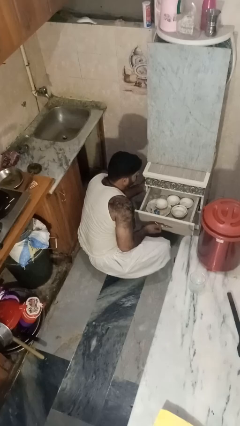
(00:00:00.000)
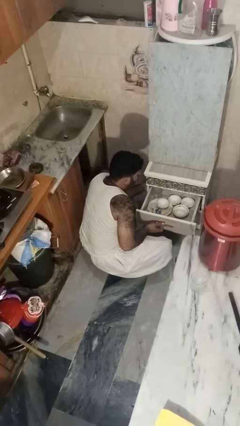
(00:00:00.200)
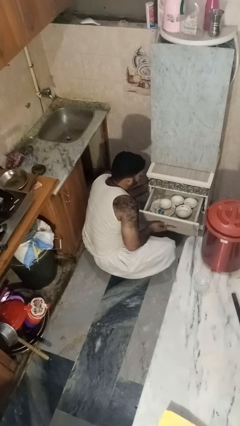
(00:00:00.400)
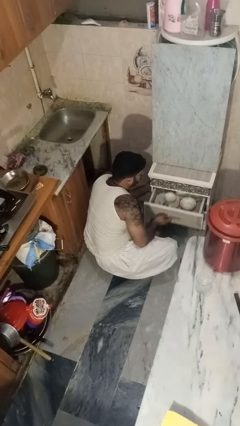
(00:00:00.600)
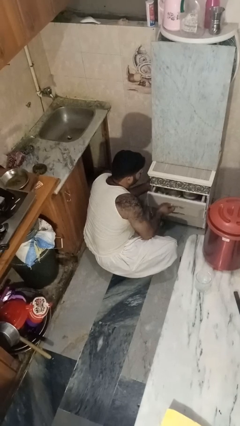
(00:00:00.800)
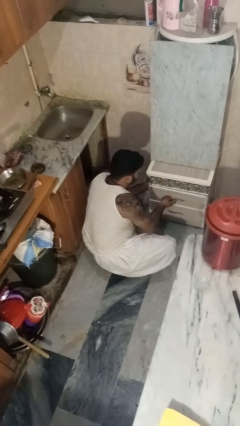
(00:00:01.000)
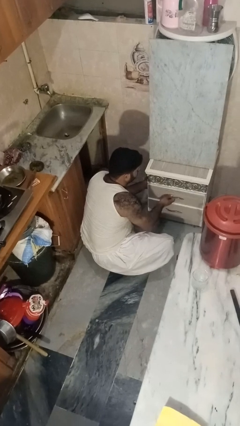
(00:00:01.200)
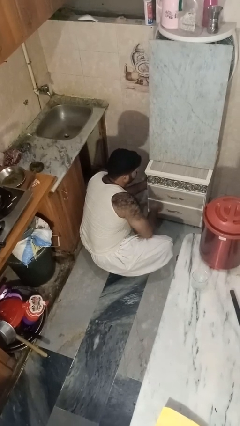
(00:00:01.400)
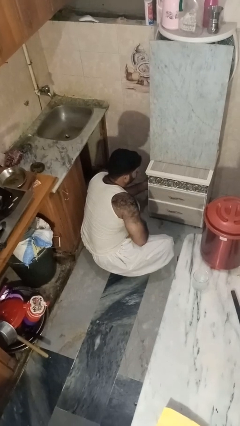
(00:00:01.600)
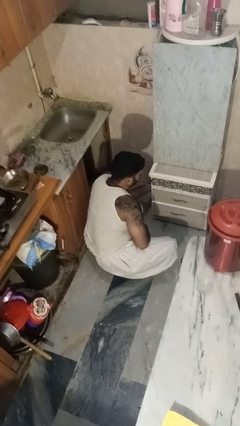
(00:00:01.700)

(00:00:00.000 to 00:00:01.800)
person closes kitchen drawer

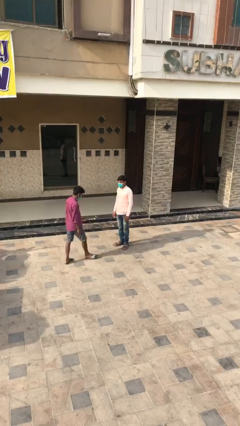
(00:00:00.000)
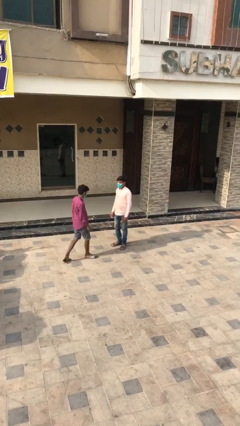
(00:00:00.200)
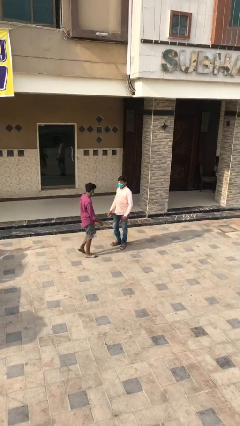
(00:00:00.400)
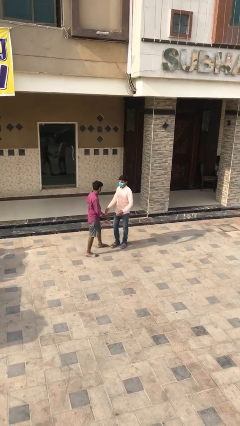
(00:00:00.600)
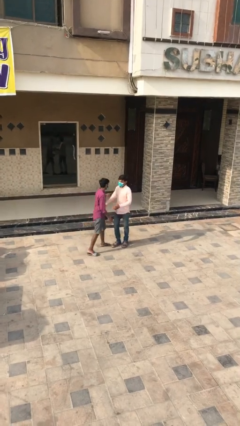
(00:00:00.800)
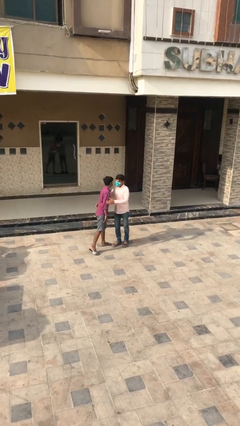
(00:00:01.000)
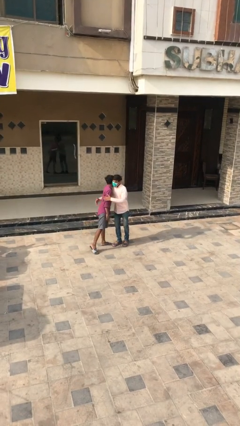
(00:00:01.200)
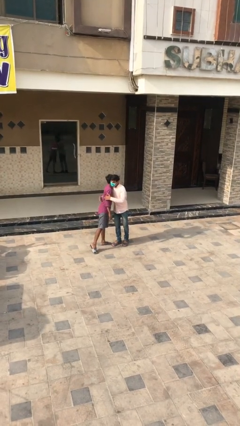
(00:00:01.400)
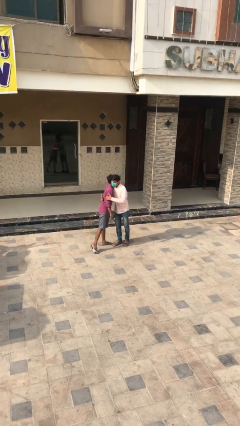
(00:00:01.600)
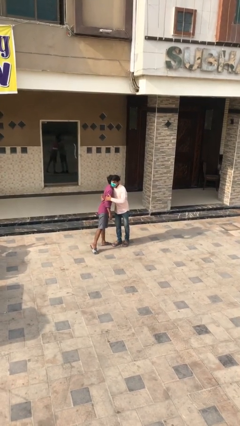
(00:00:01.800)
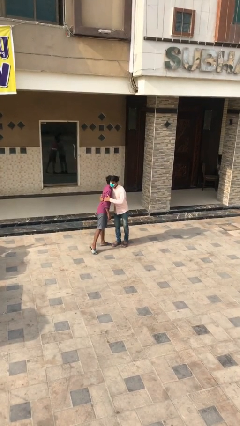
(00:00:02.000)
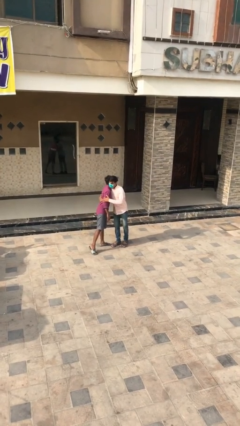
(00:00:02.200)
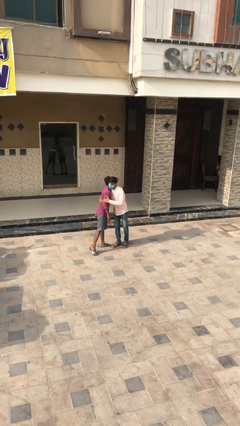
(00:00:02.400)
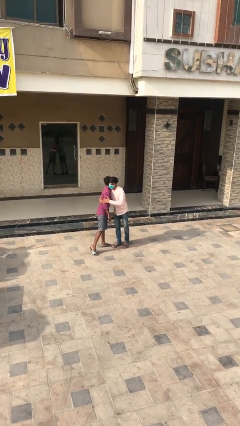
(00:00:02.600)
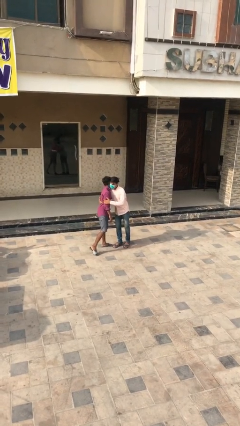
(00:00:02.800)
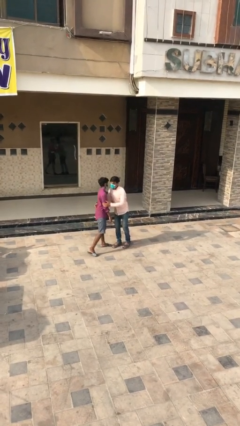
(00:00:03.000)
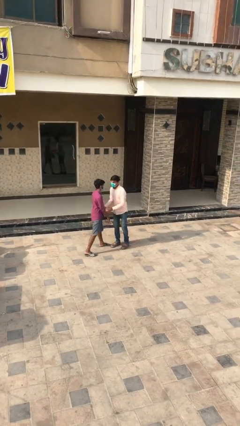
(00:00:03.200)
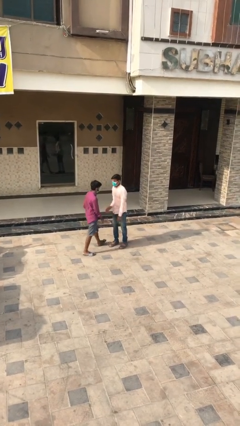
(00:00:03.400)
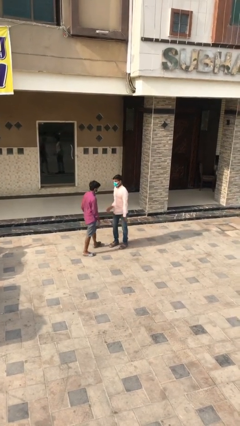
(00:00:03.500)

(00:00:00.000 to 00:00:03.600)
person embraces person

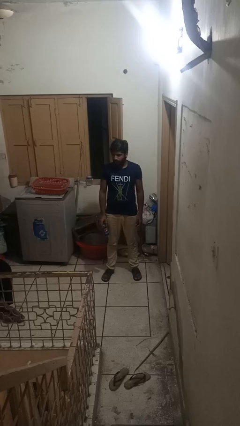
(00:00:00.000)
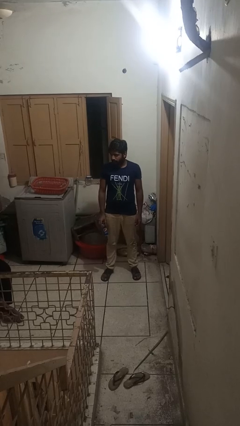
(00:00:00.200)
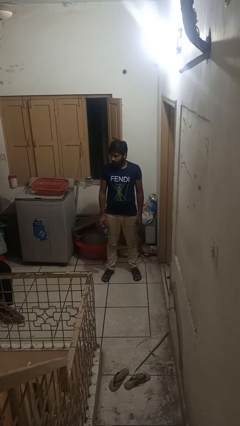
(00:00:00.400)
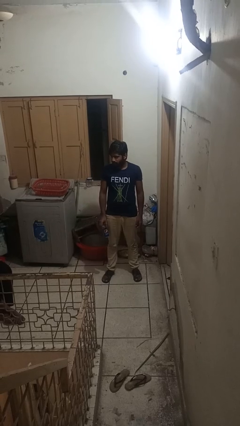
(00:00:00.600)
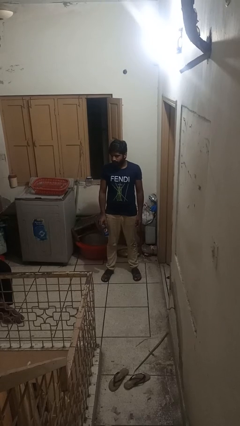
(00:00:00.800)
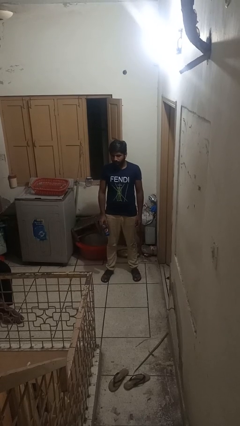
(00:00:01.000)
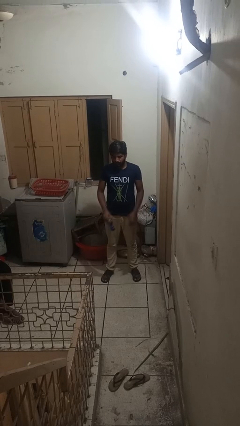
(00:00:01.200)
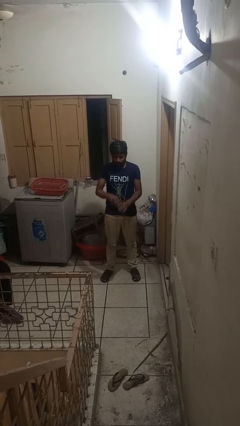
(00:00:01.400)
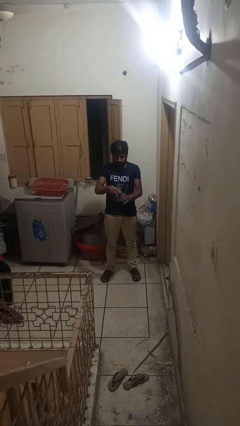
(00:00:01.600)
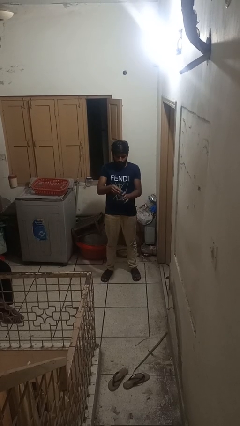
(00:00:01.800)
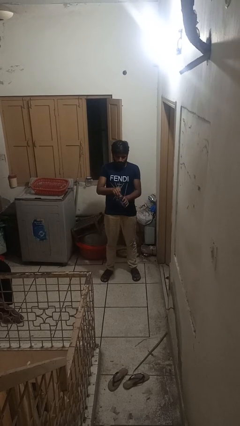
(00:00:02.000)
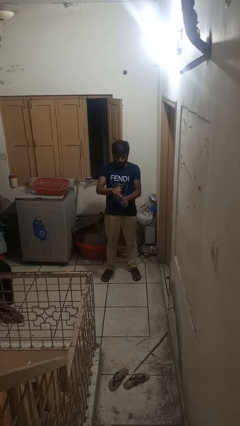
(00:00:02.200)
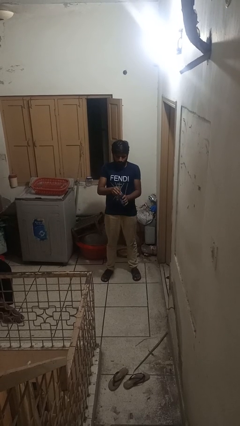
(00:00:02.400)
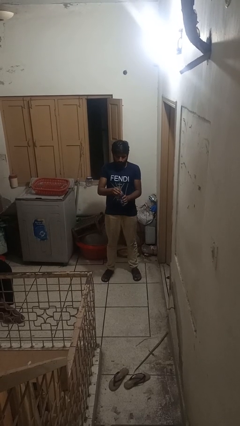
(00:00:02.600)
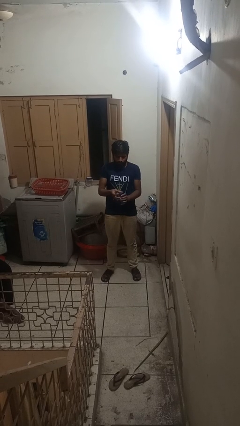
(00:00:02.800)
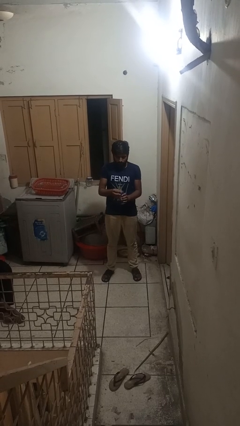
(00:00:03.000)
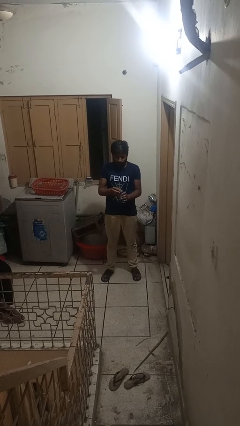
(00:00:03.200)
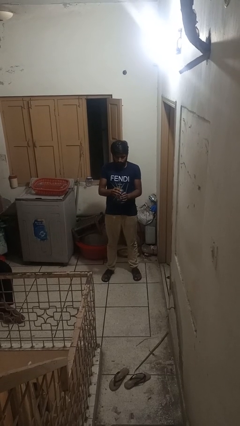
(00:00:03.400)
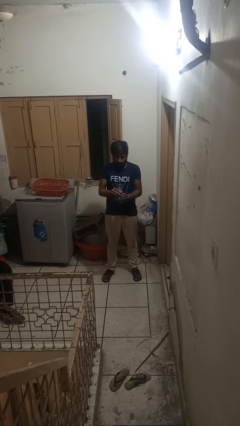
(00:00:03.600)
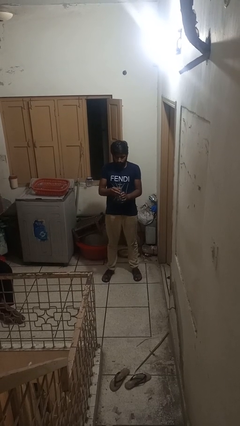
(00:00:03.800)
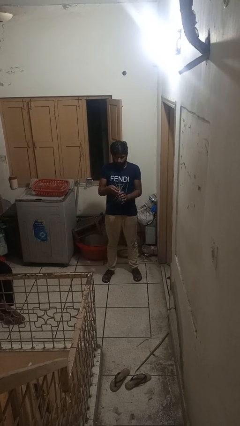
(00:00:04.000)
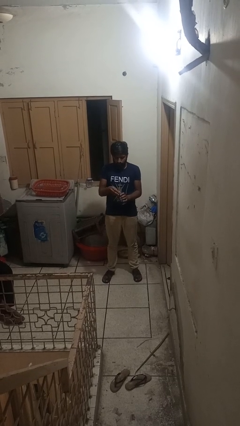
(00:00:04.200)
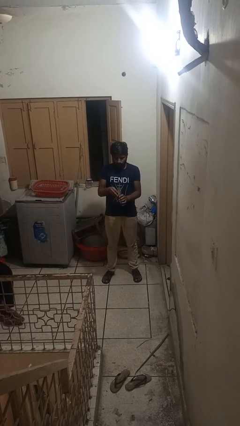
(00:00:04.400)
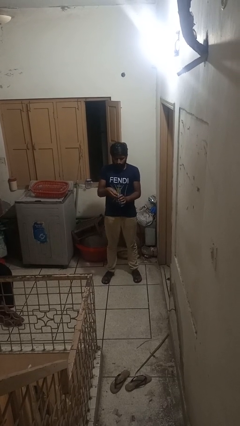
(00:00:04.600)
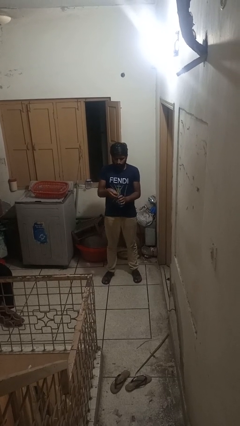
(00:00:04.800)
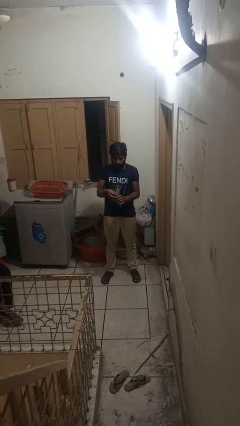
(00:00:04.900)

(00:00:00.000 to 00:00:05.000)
person opens beverage can

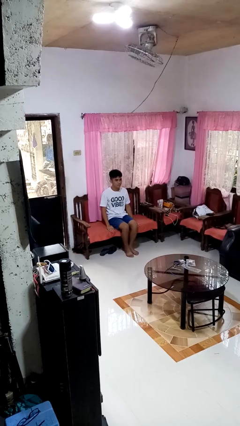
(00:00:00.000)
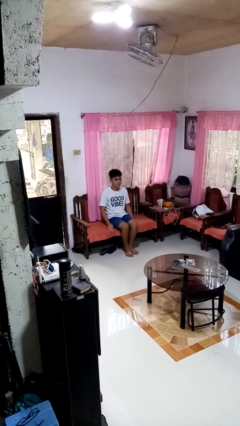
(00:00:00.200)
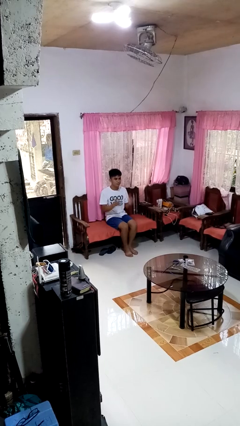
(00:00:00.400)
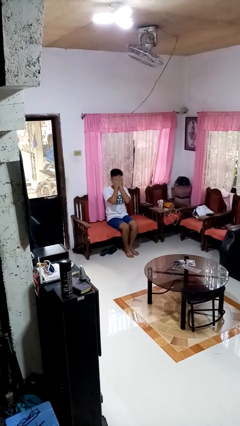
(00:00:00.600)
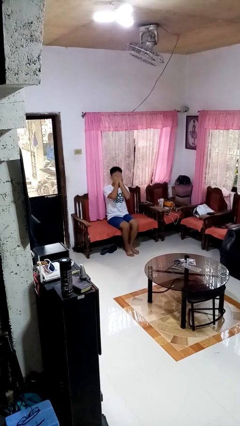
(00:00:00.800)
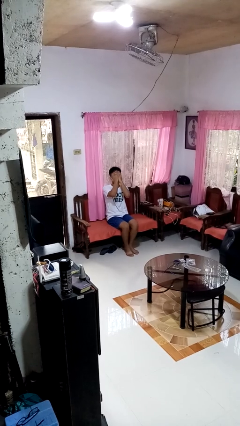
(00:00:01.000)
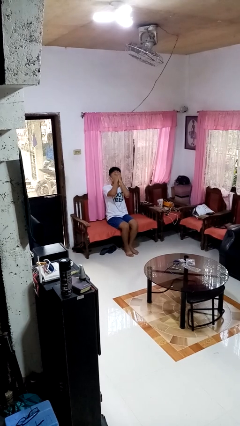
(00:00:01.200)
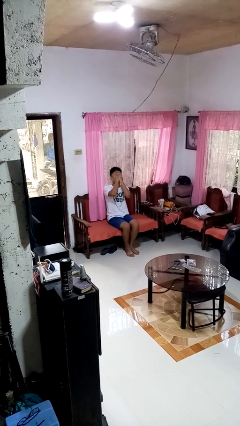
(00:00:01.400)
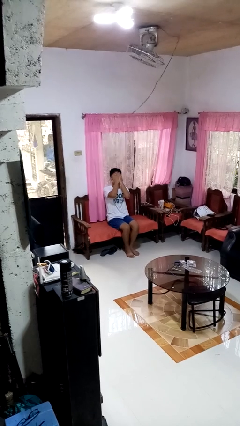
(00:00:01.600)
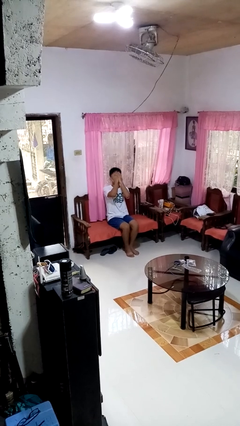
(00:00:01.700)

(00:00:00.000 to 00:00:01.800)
person covers face with hands

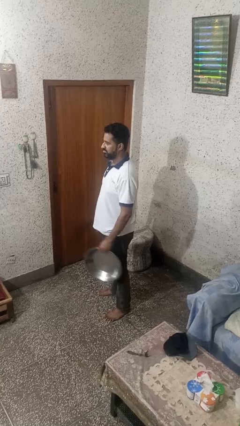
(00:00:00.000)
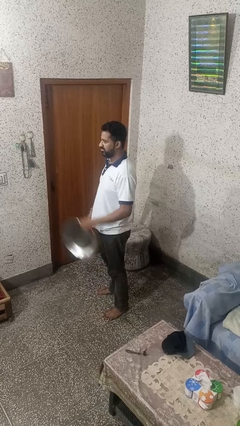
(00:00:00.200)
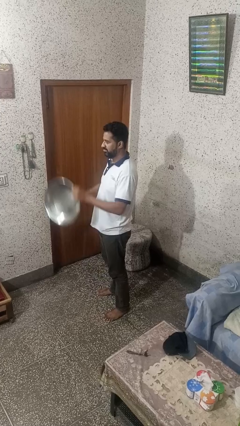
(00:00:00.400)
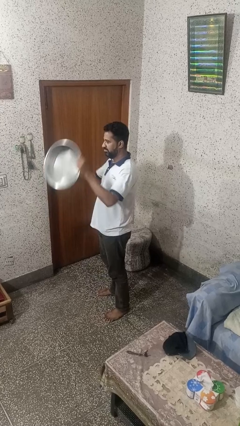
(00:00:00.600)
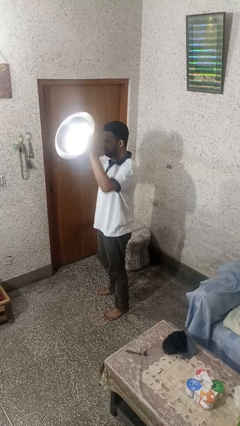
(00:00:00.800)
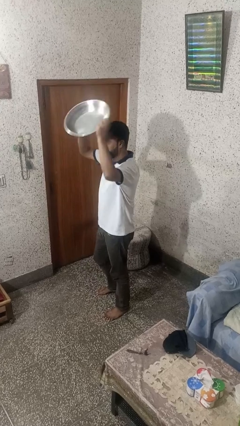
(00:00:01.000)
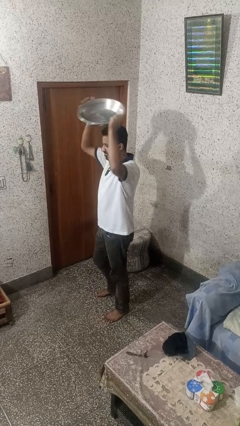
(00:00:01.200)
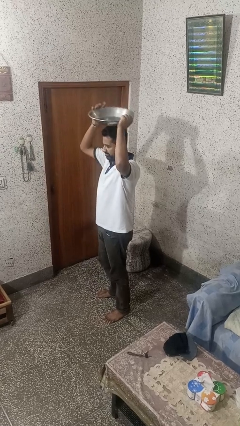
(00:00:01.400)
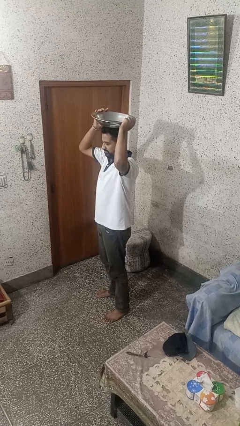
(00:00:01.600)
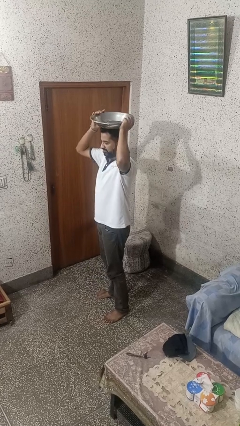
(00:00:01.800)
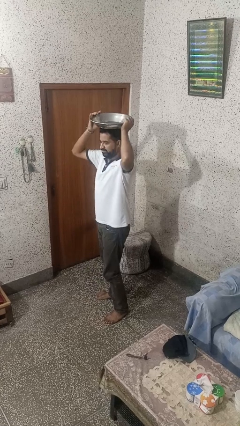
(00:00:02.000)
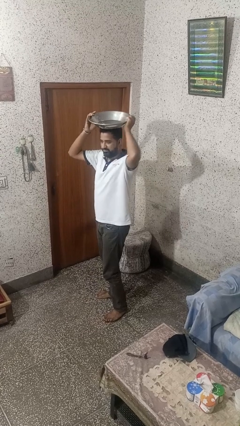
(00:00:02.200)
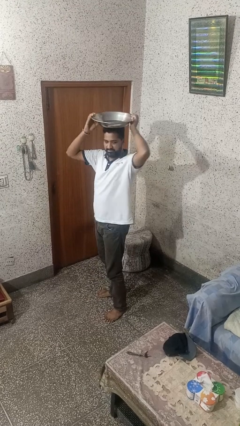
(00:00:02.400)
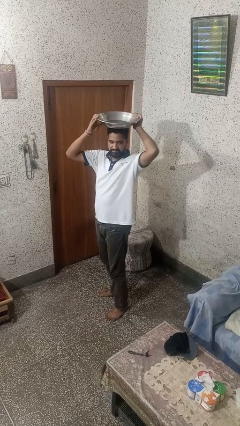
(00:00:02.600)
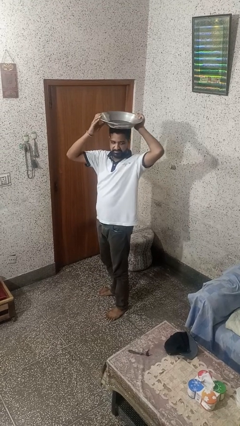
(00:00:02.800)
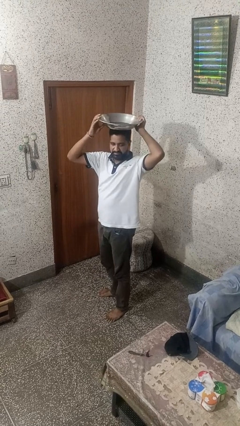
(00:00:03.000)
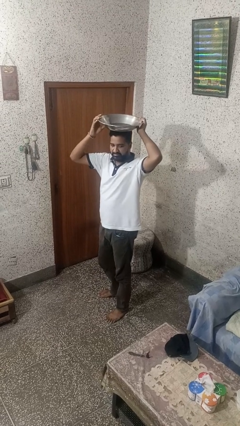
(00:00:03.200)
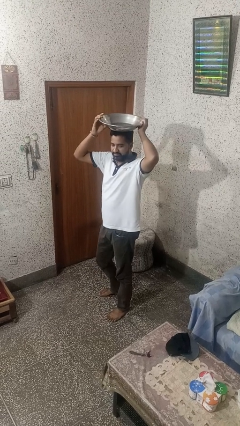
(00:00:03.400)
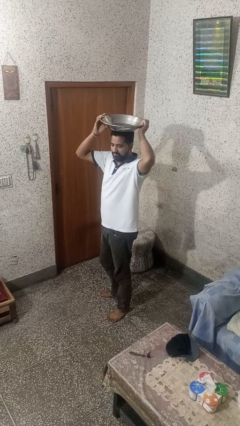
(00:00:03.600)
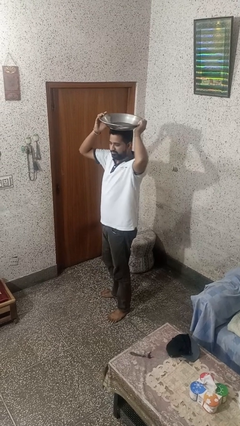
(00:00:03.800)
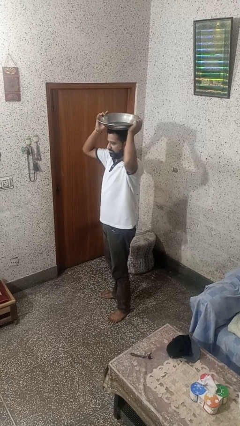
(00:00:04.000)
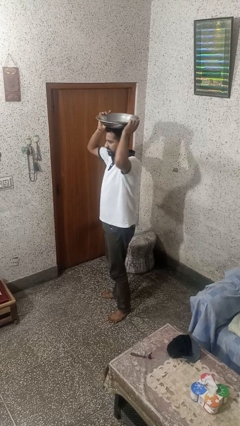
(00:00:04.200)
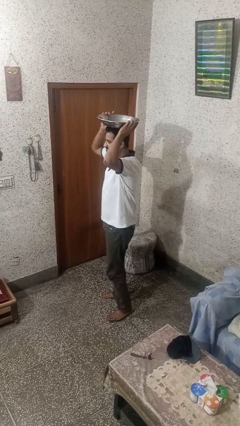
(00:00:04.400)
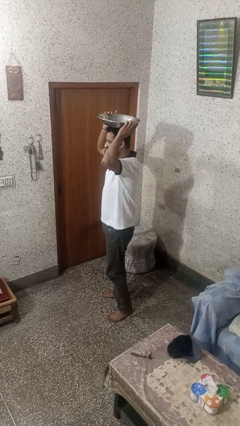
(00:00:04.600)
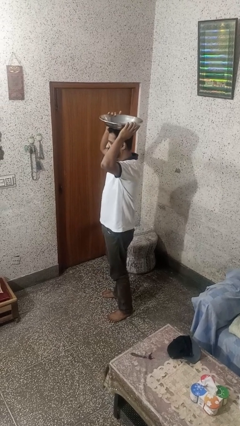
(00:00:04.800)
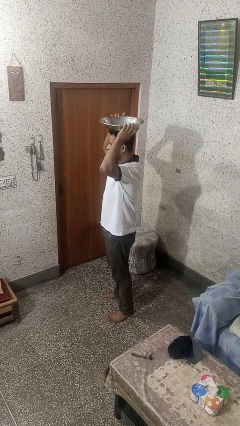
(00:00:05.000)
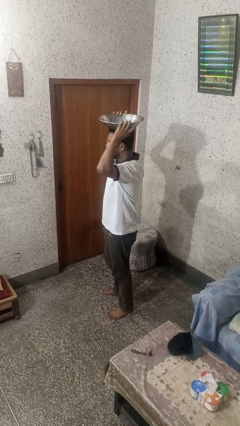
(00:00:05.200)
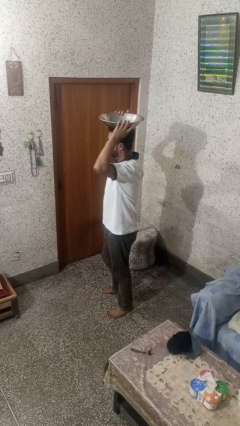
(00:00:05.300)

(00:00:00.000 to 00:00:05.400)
person holds object above head
